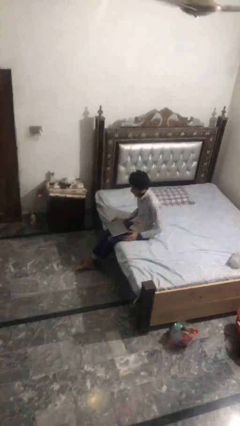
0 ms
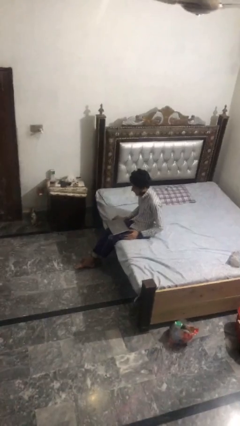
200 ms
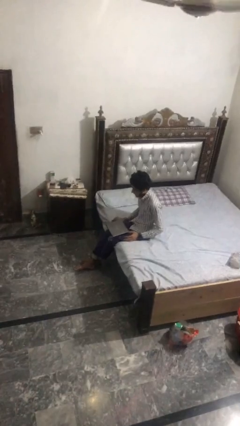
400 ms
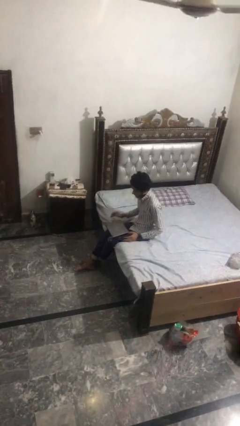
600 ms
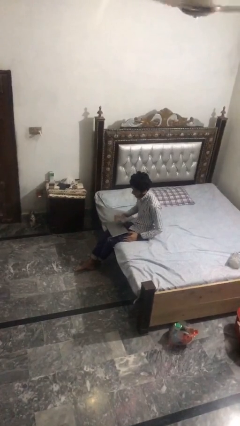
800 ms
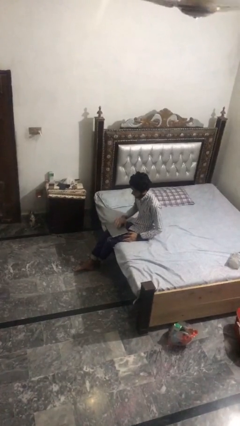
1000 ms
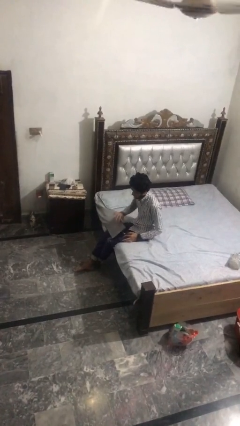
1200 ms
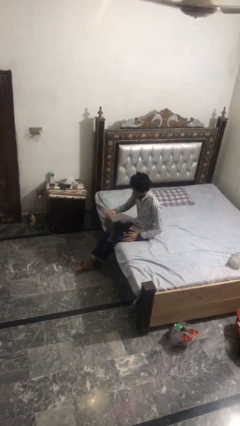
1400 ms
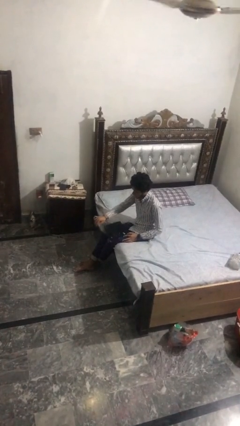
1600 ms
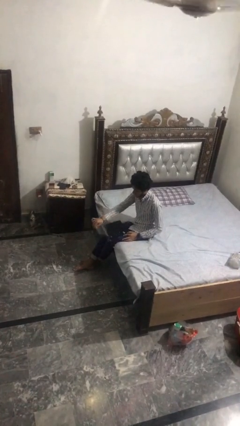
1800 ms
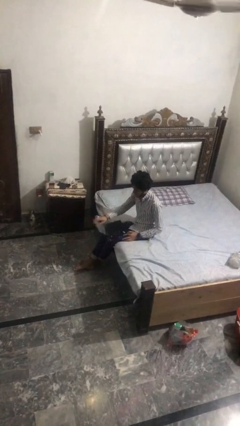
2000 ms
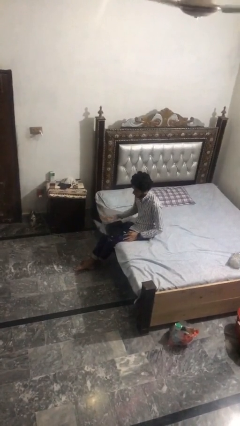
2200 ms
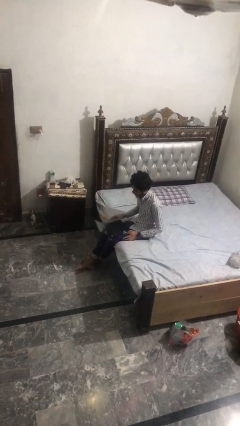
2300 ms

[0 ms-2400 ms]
person opens laptop

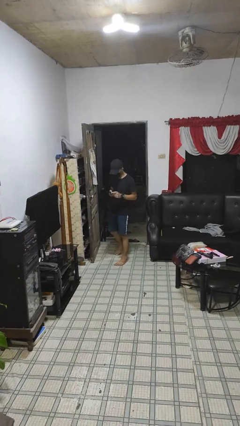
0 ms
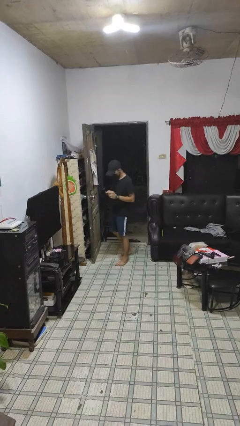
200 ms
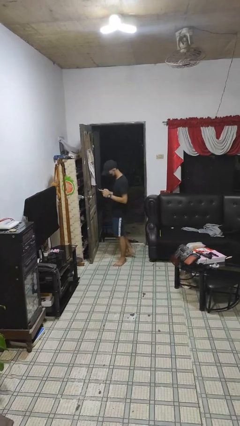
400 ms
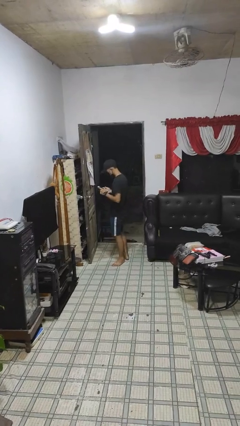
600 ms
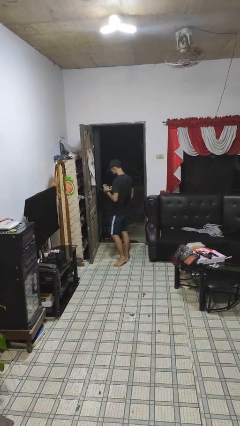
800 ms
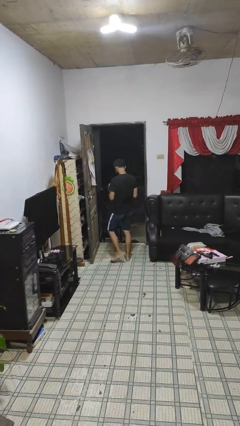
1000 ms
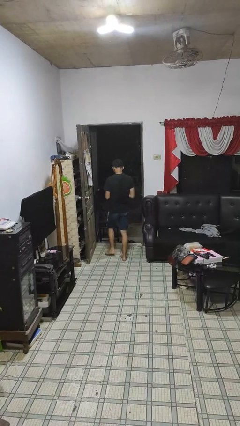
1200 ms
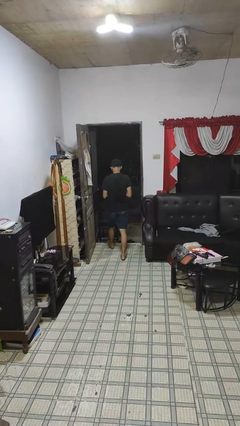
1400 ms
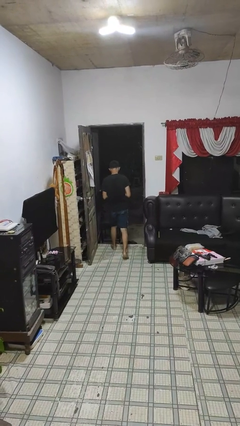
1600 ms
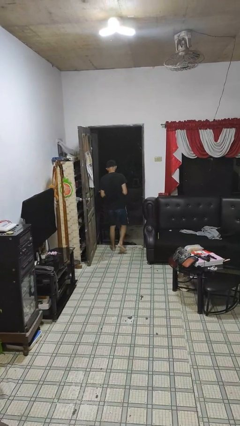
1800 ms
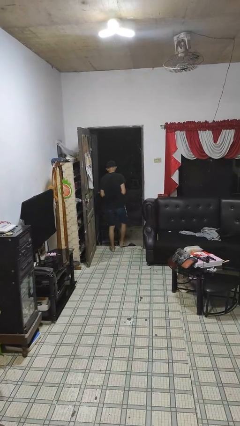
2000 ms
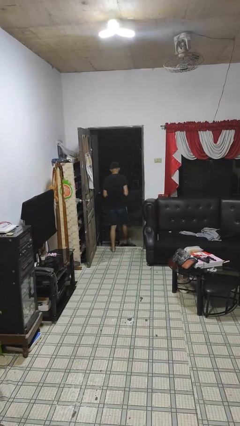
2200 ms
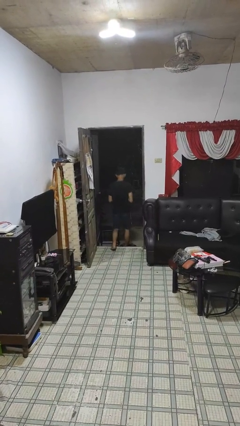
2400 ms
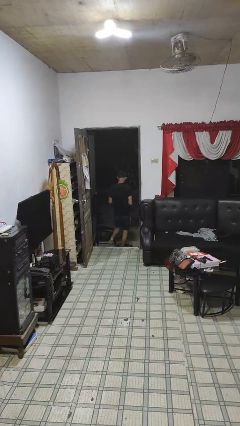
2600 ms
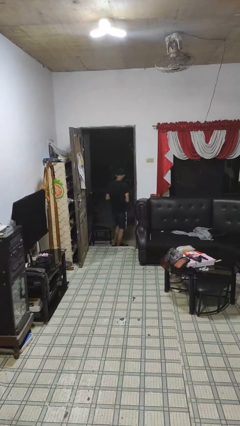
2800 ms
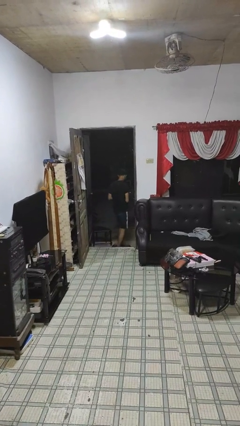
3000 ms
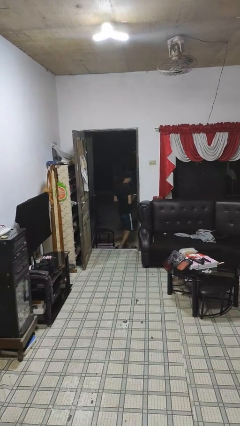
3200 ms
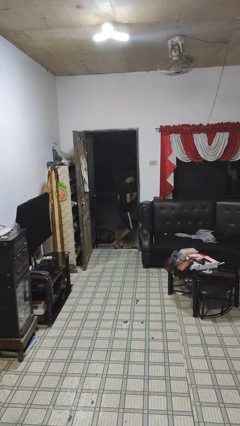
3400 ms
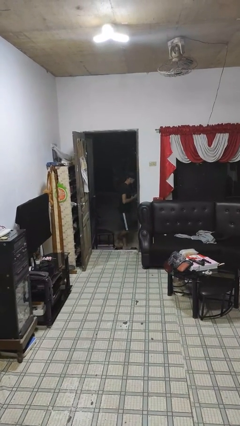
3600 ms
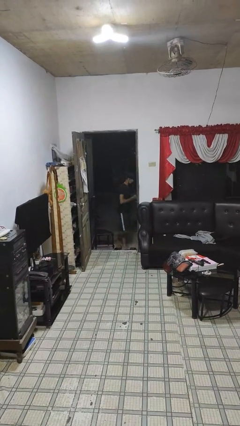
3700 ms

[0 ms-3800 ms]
person exits scene through structure

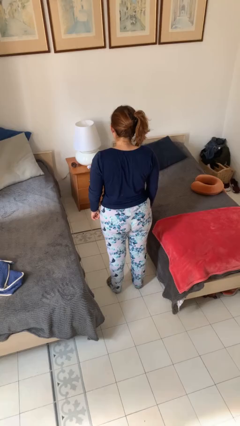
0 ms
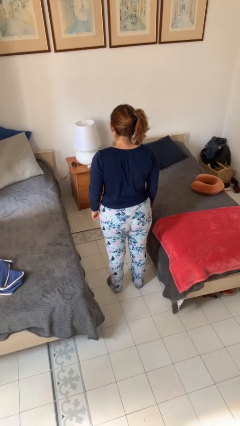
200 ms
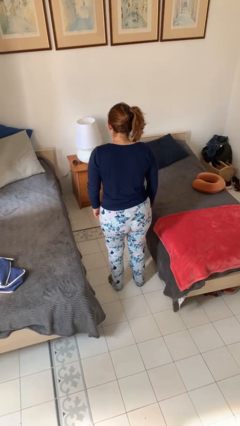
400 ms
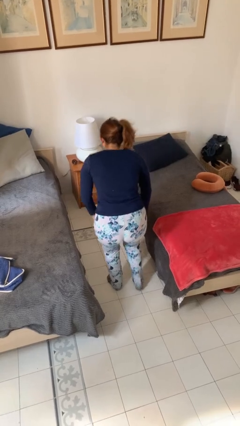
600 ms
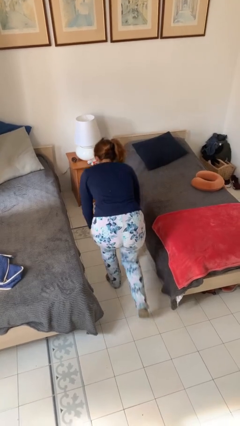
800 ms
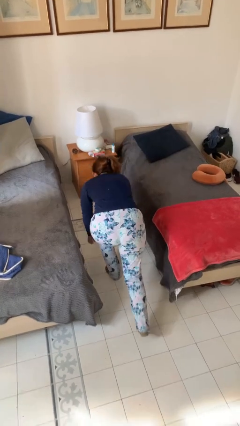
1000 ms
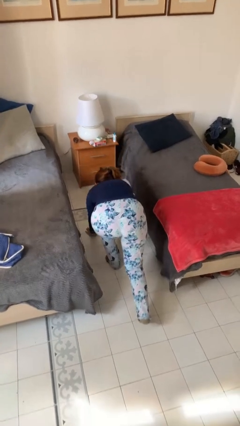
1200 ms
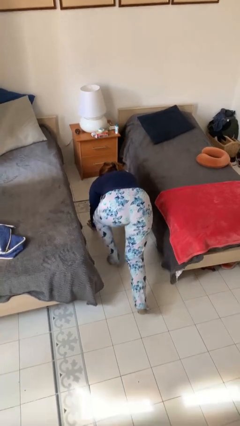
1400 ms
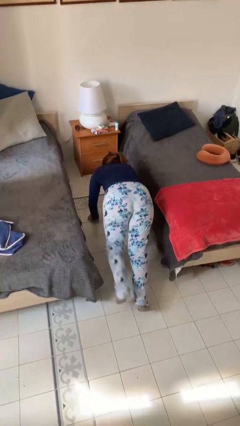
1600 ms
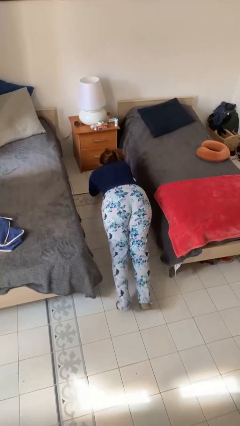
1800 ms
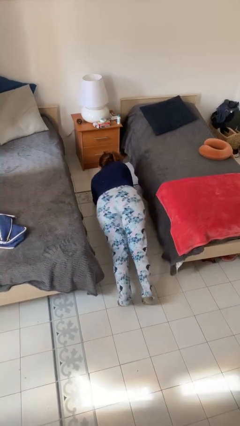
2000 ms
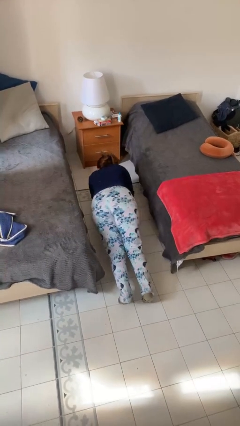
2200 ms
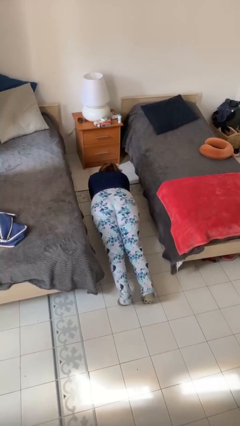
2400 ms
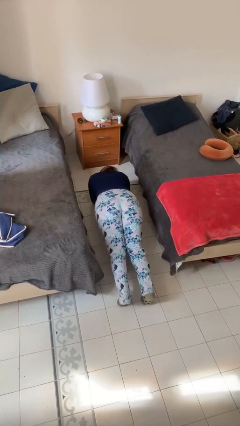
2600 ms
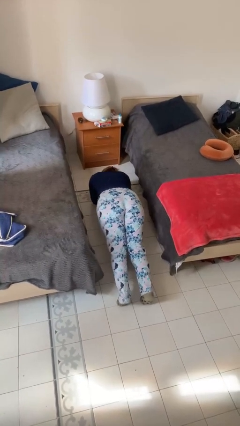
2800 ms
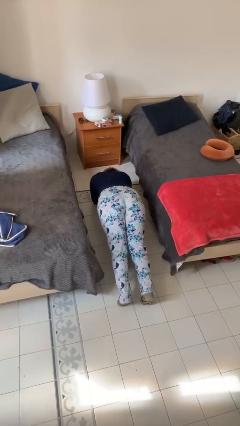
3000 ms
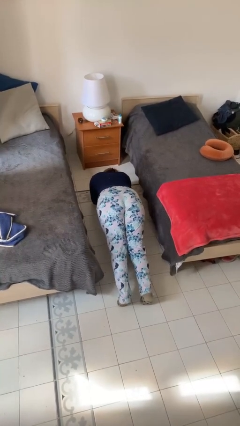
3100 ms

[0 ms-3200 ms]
person exercises with plank

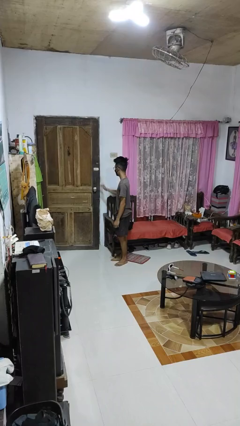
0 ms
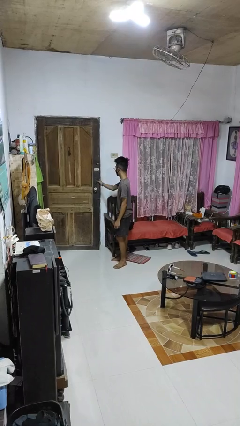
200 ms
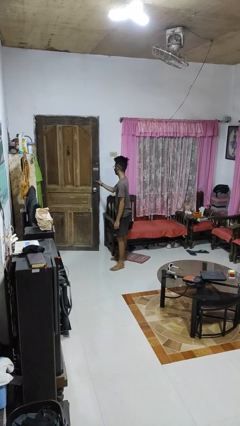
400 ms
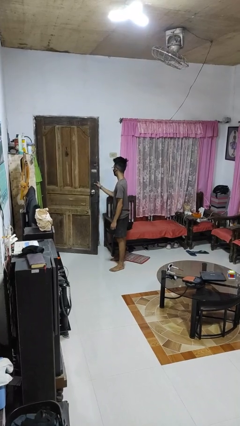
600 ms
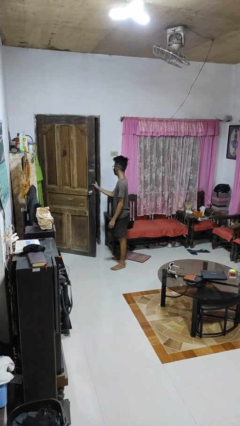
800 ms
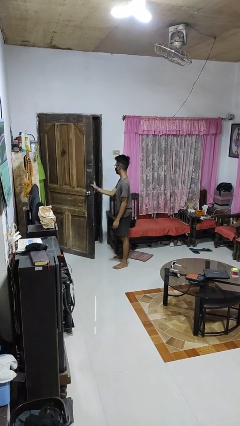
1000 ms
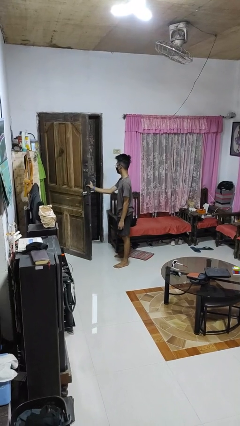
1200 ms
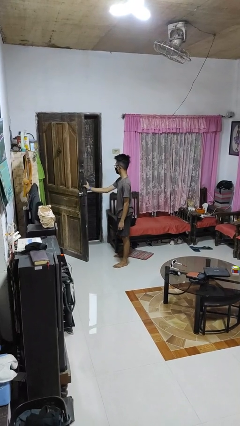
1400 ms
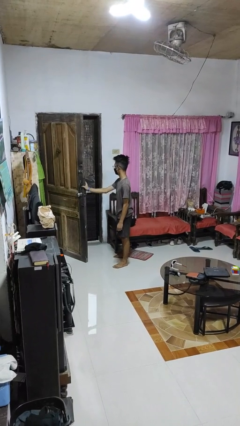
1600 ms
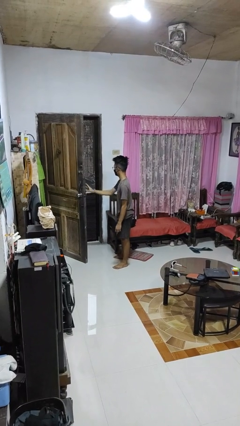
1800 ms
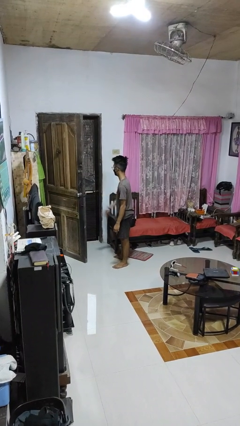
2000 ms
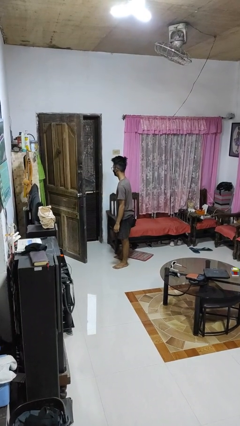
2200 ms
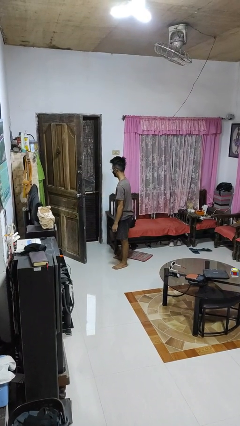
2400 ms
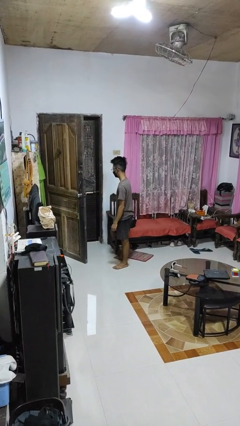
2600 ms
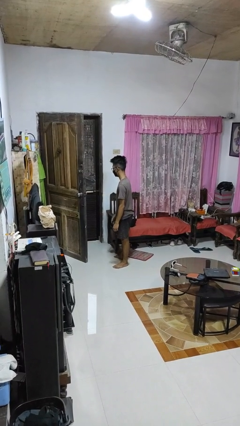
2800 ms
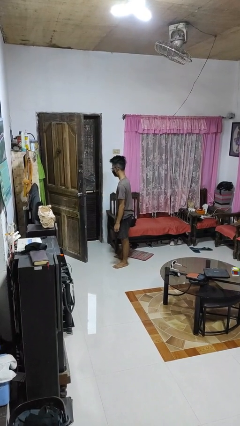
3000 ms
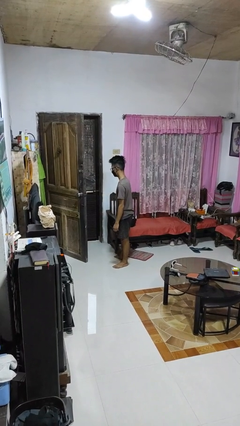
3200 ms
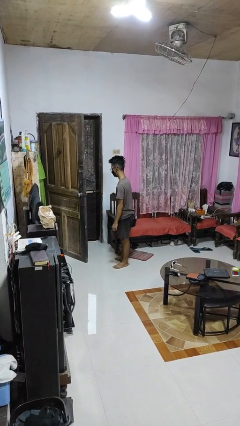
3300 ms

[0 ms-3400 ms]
person opens facility door

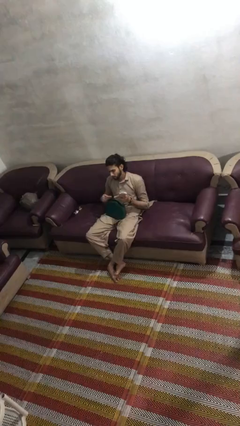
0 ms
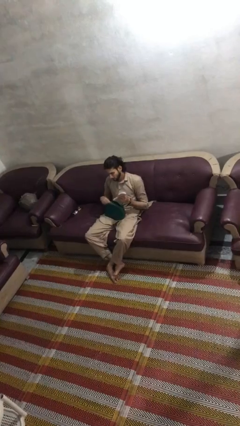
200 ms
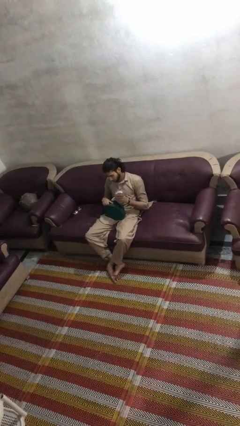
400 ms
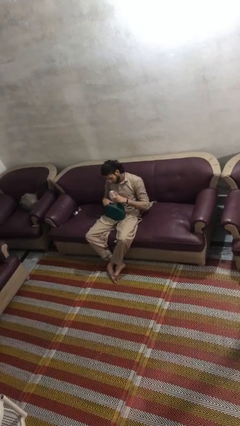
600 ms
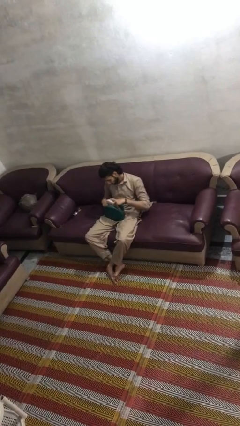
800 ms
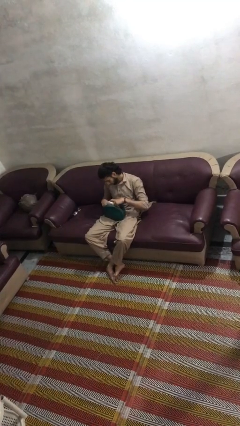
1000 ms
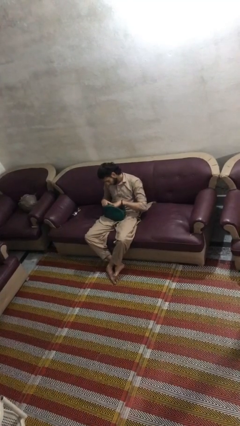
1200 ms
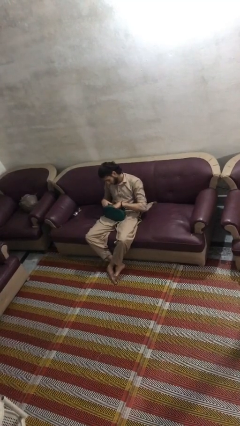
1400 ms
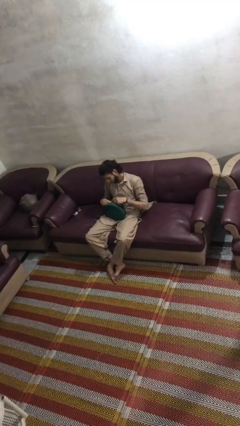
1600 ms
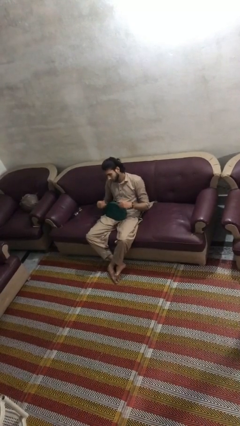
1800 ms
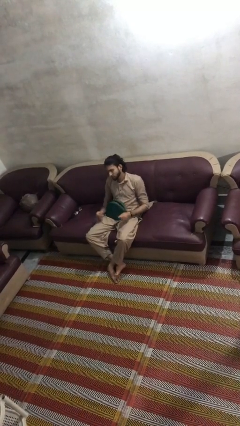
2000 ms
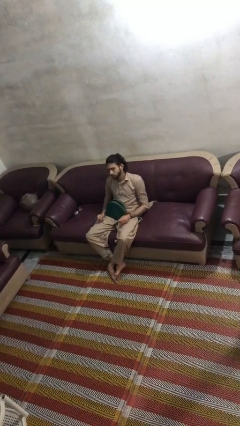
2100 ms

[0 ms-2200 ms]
person puts object into purse

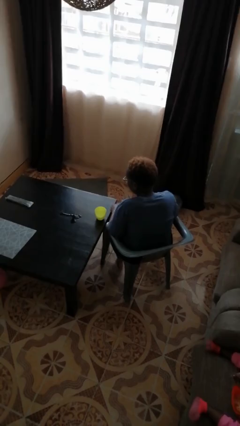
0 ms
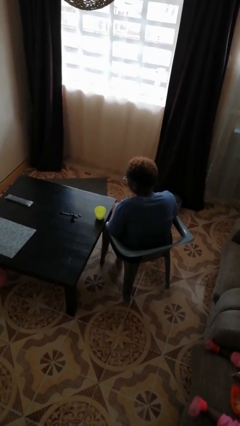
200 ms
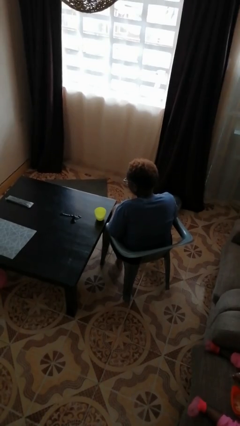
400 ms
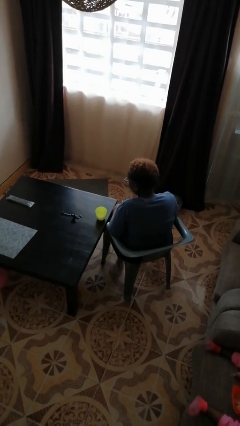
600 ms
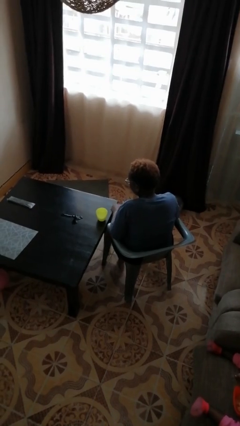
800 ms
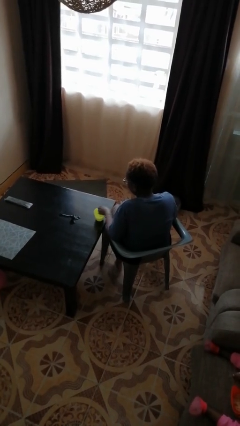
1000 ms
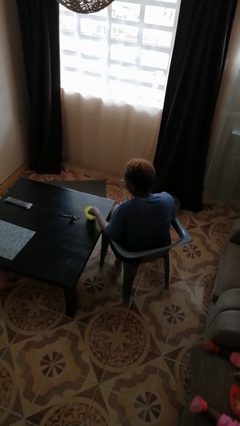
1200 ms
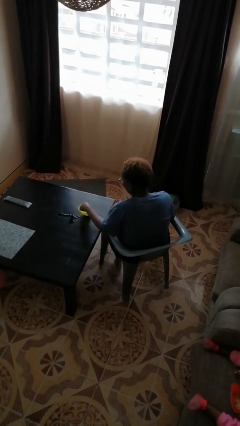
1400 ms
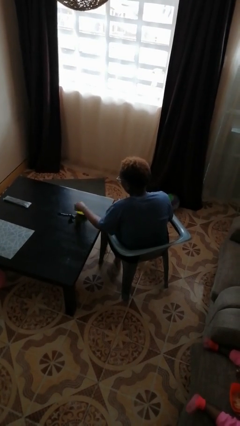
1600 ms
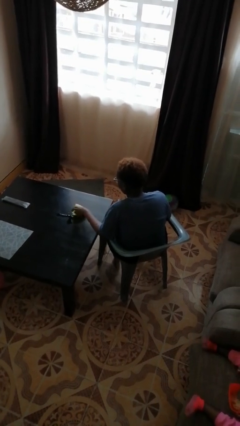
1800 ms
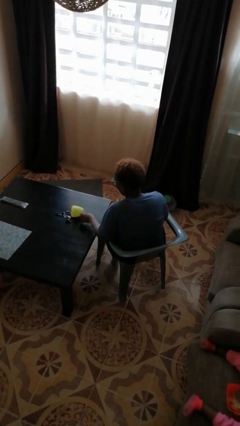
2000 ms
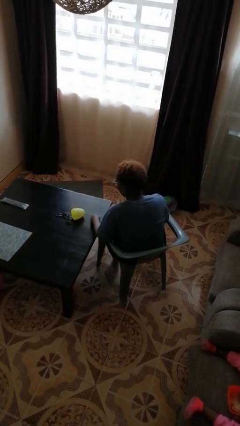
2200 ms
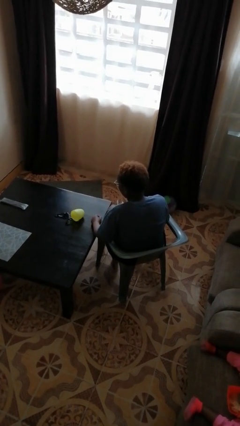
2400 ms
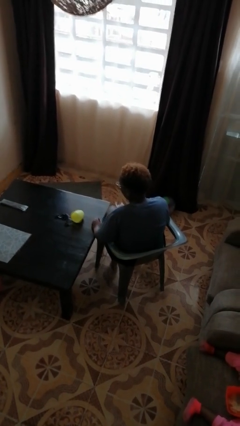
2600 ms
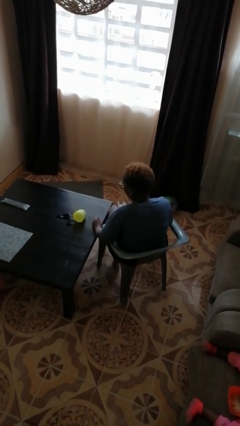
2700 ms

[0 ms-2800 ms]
person spills on table
